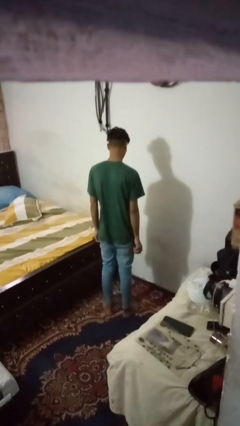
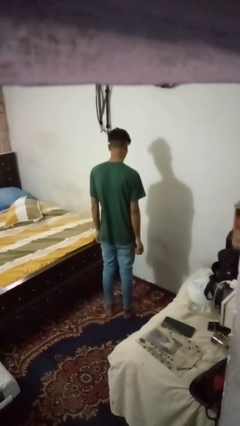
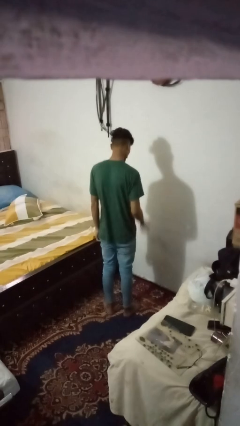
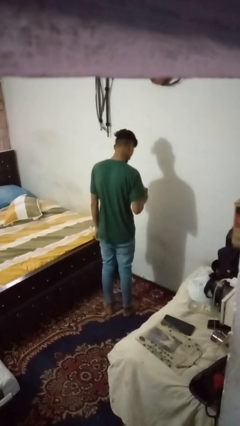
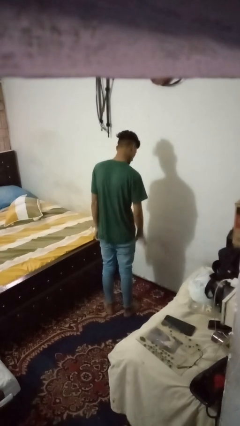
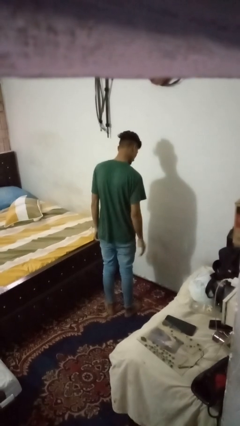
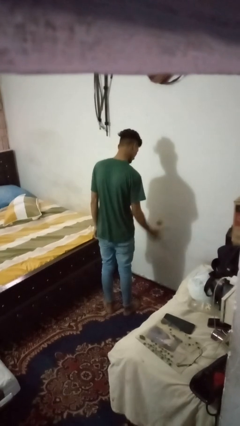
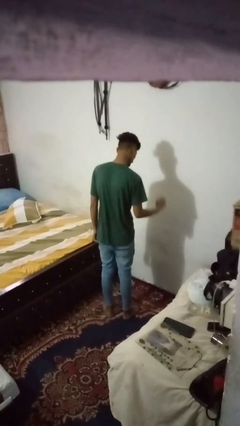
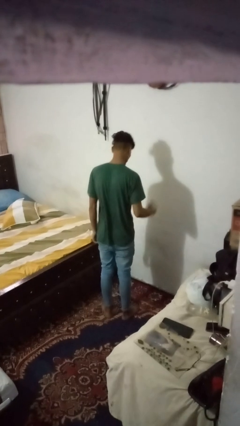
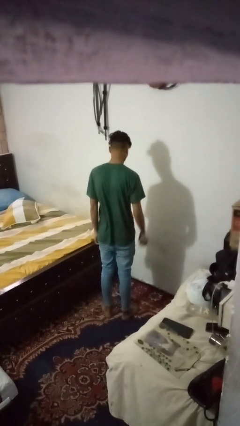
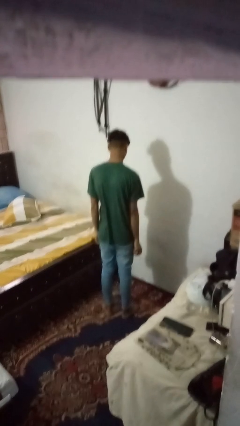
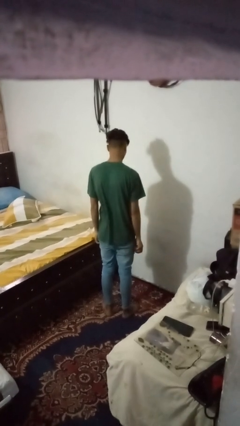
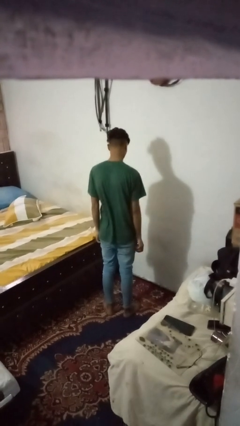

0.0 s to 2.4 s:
person bounces ball on floor

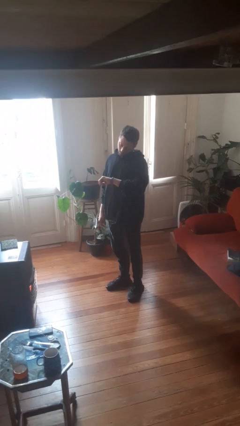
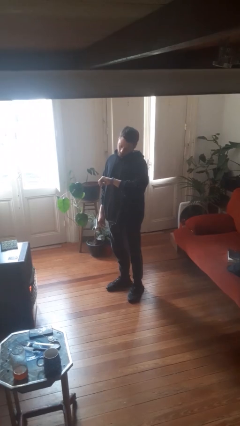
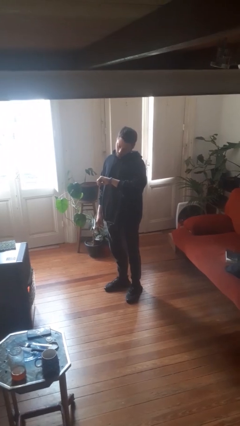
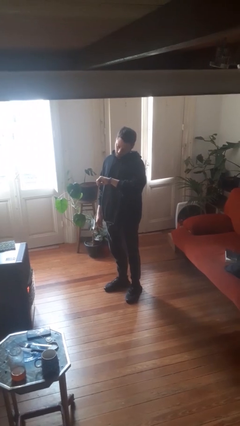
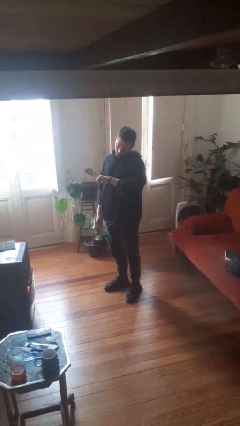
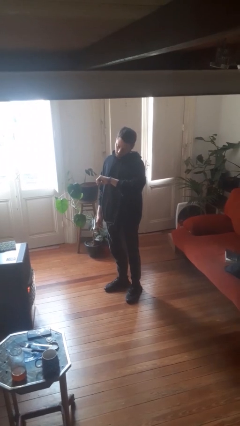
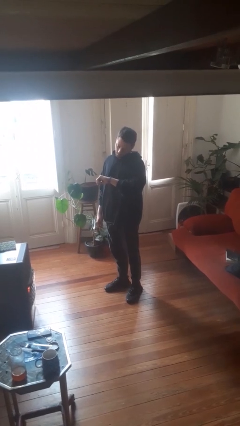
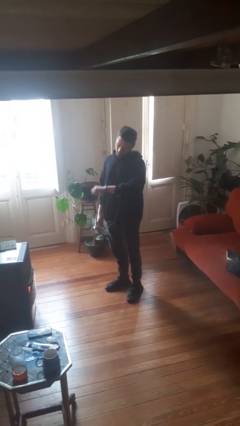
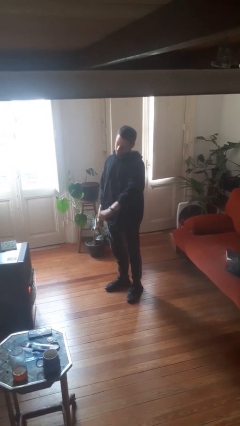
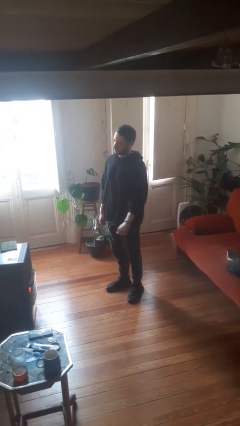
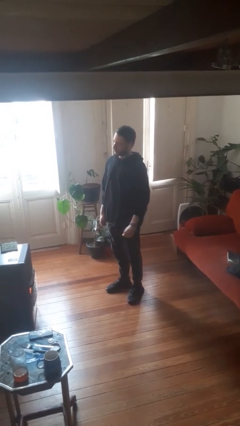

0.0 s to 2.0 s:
person looks at wristwatch

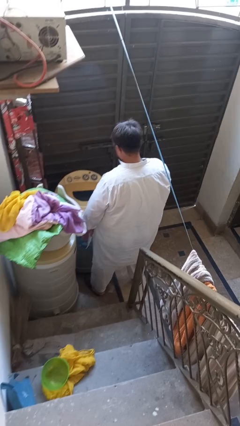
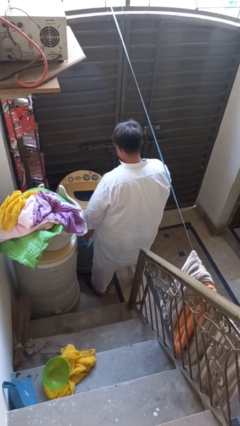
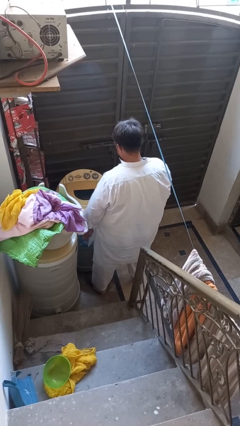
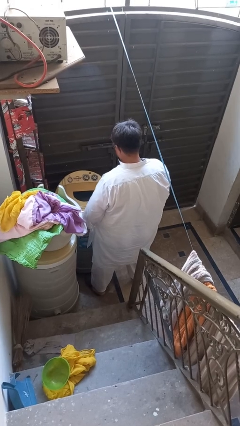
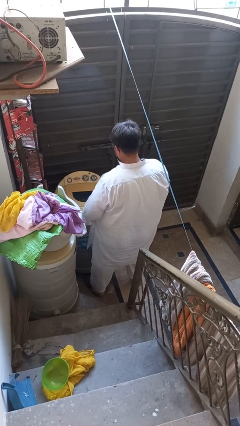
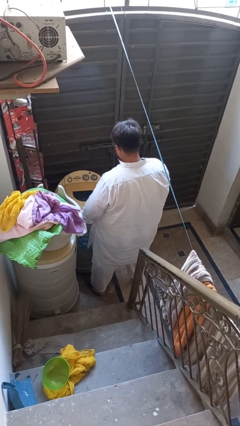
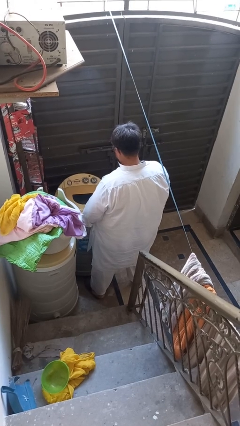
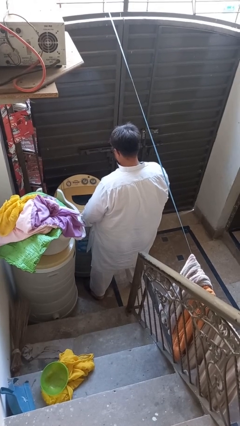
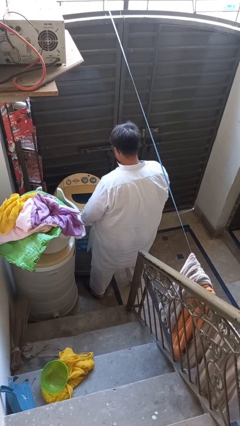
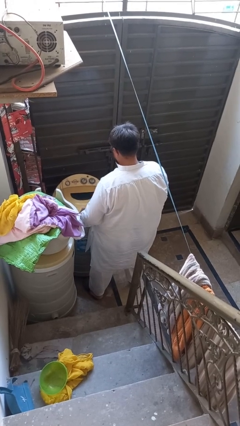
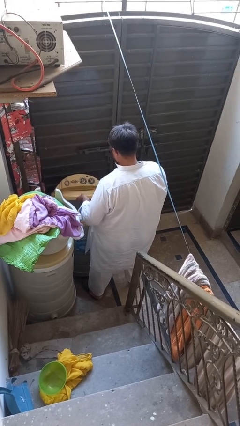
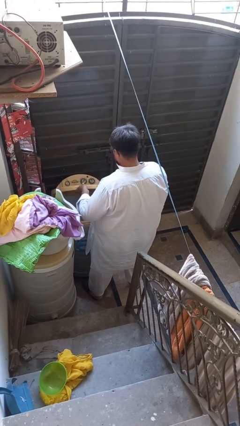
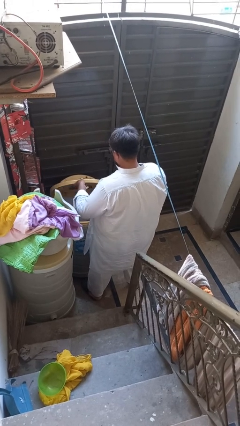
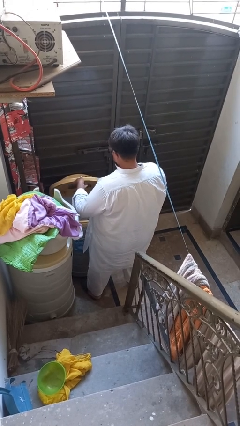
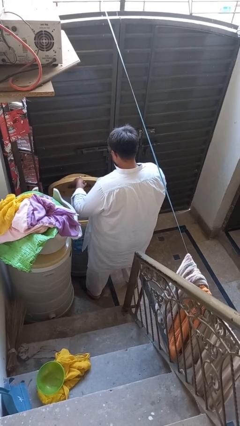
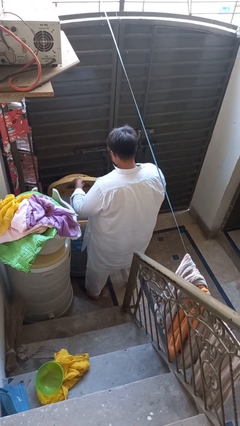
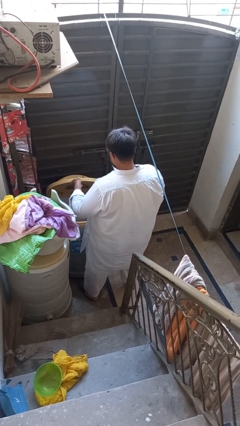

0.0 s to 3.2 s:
person opens clothes washer

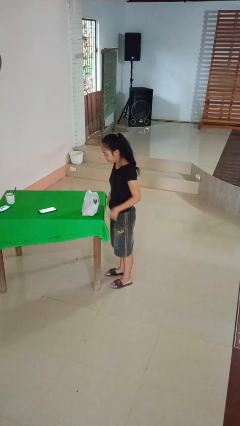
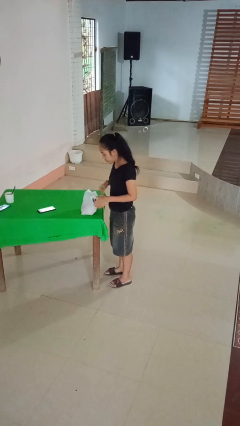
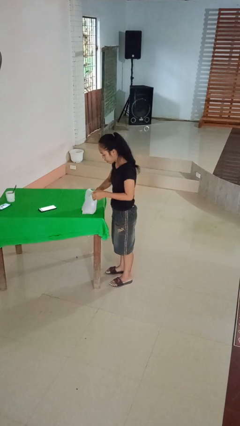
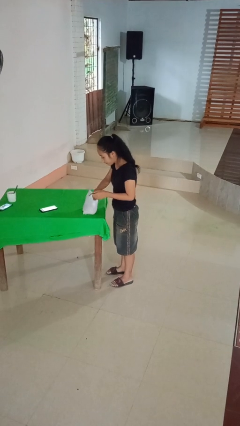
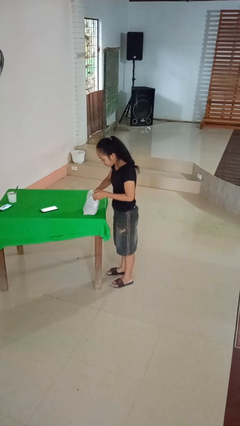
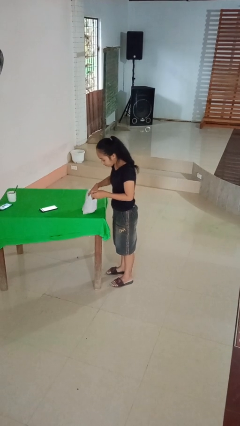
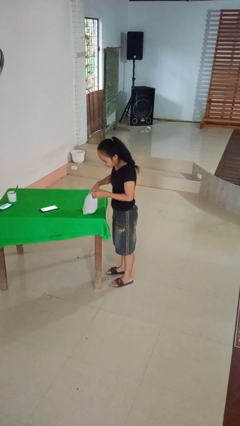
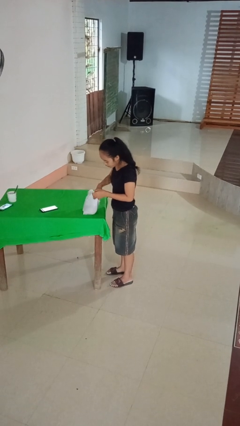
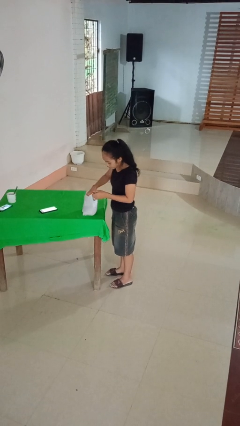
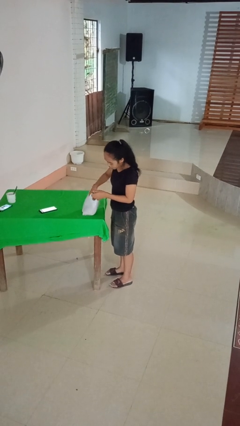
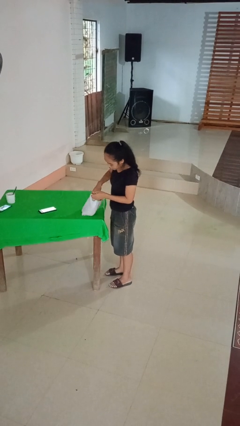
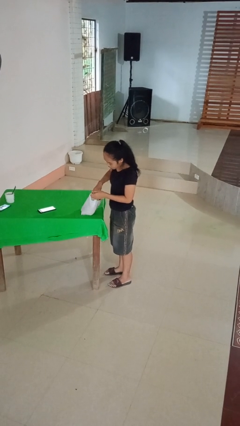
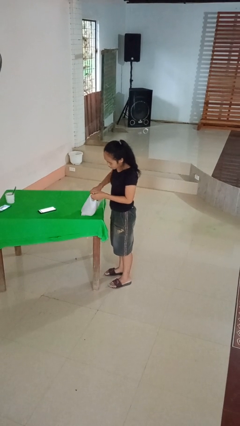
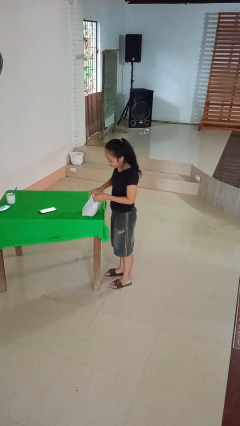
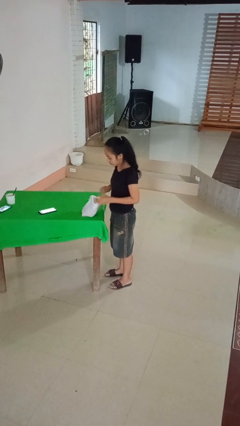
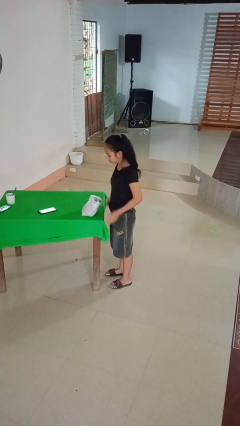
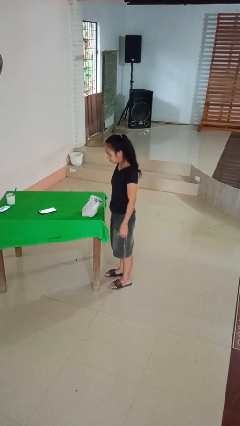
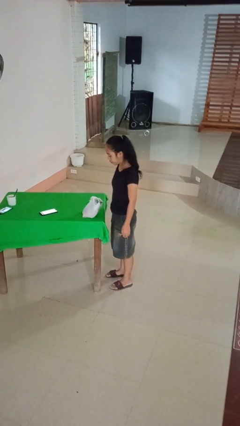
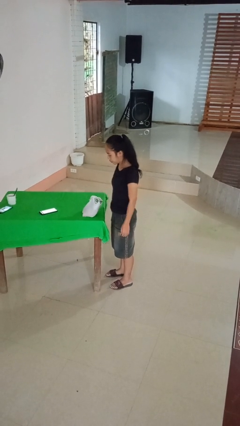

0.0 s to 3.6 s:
person searches in bag

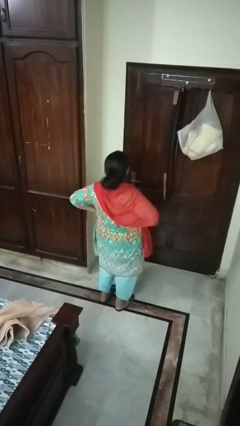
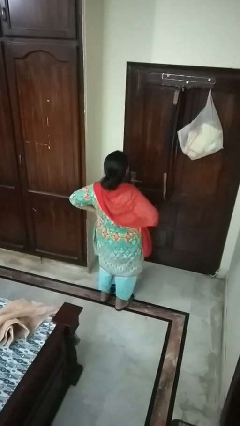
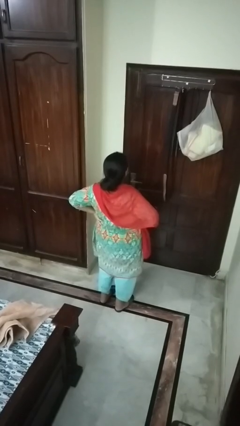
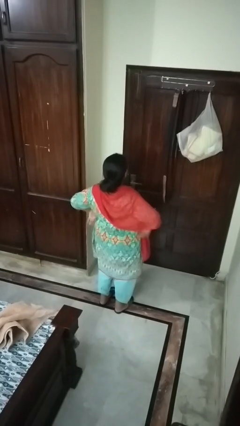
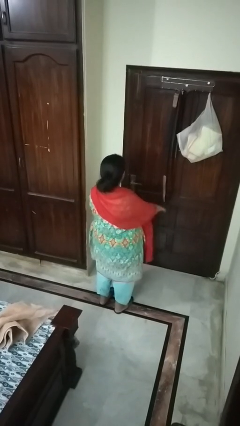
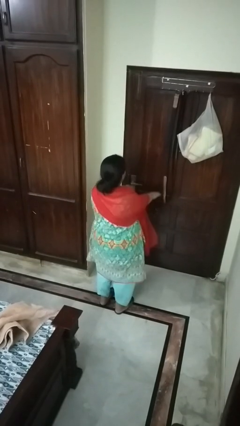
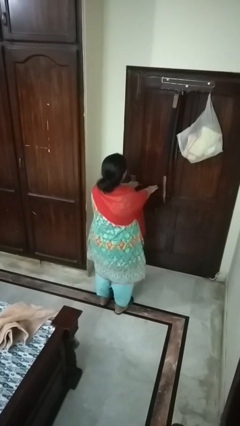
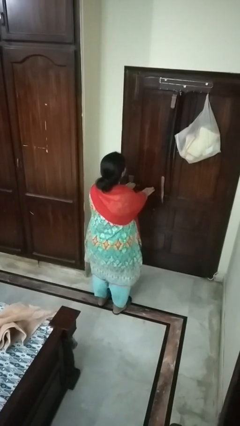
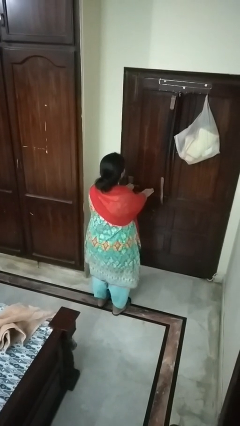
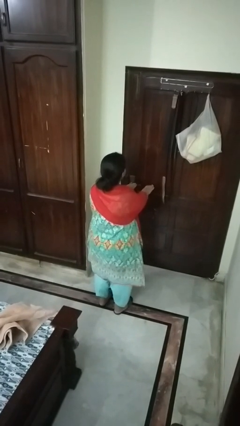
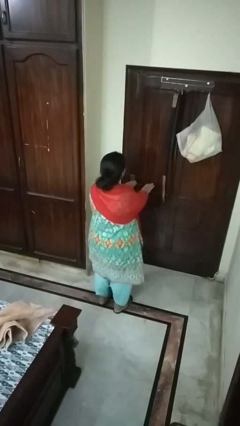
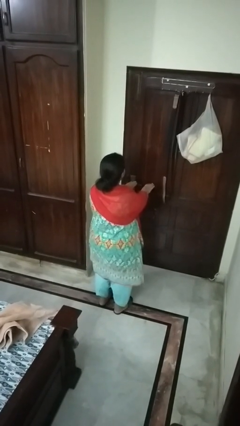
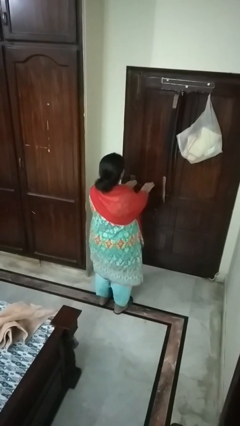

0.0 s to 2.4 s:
person stretches arms to side

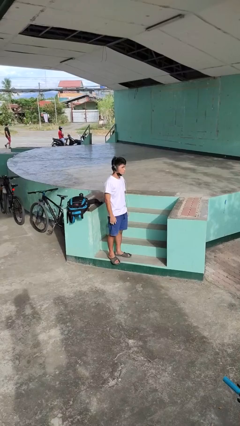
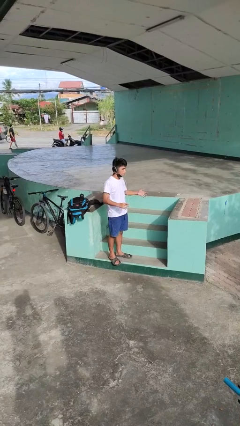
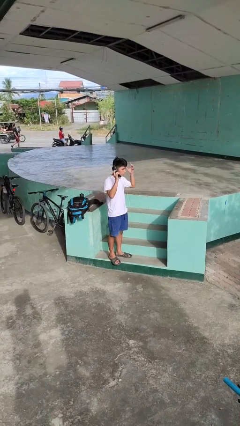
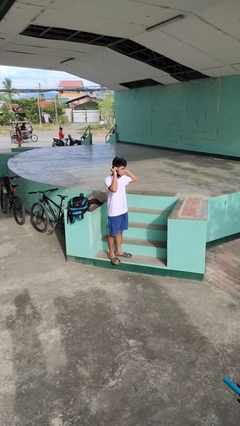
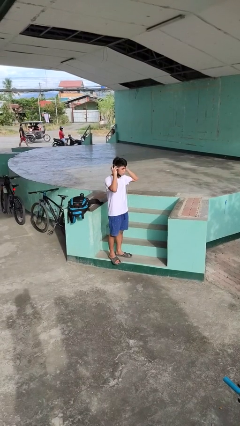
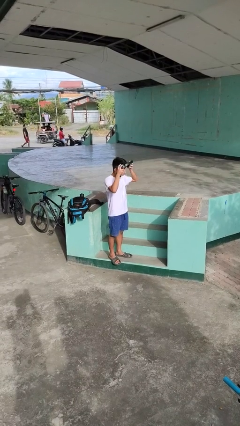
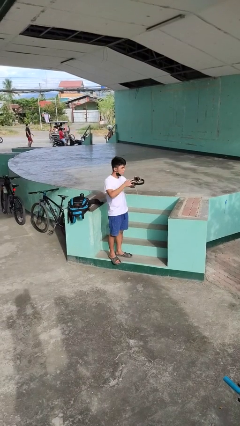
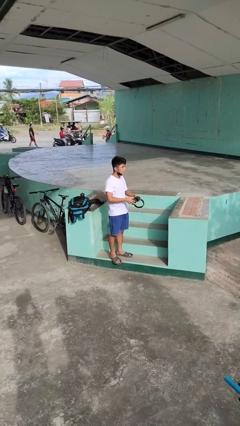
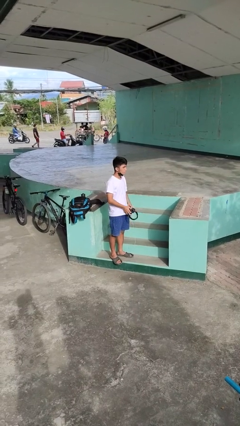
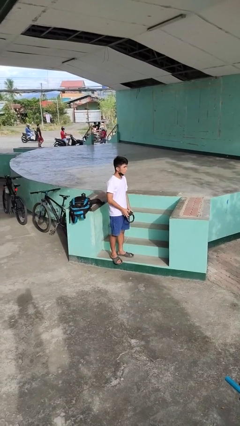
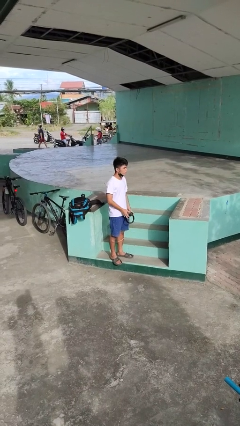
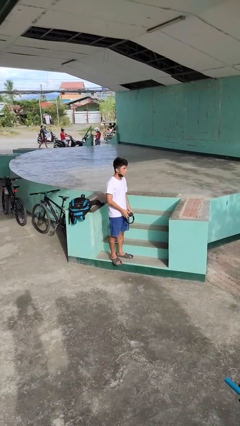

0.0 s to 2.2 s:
person takes off headphones

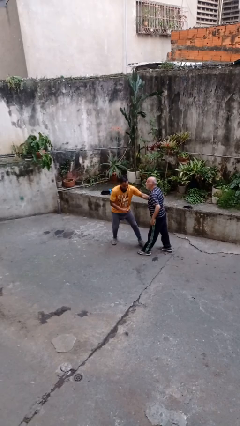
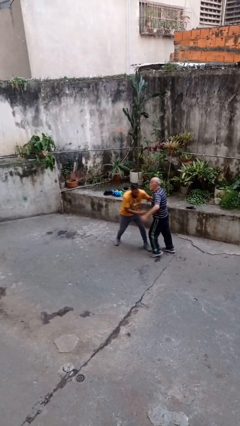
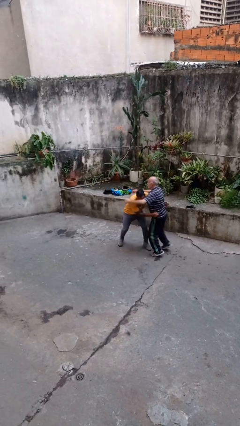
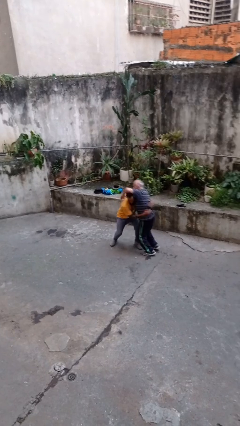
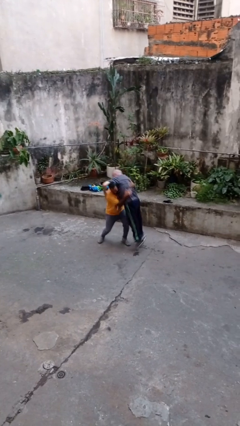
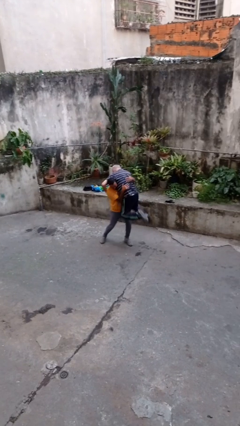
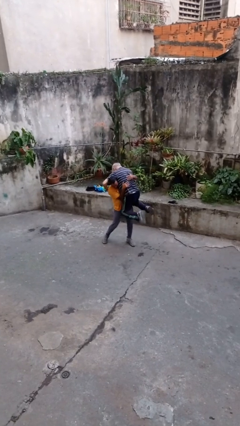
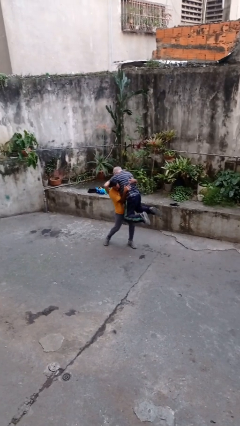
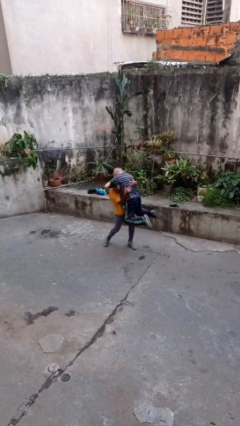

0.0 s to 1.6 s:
person picks up person

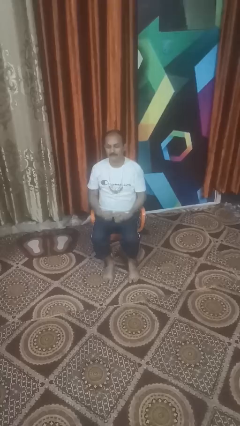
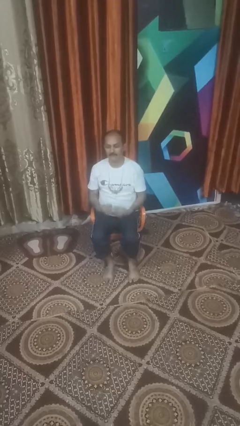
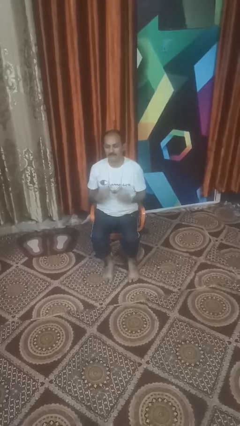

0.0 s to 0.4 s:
person takes off necklace
